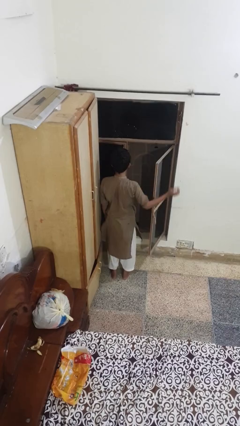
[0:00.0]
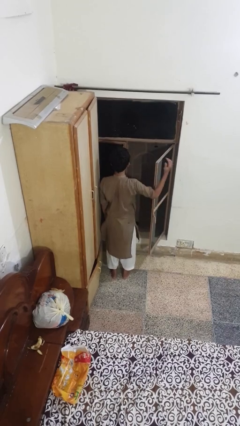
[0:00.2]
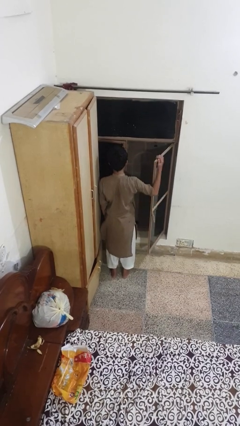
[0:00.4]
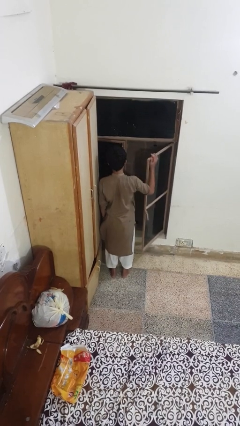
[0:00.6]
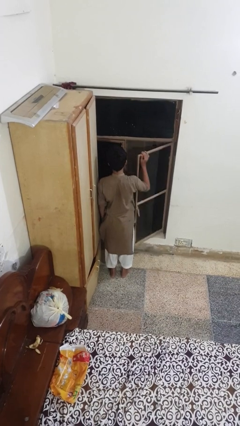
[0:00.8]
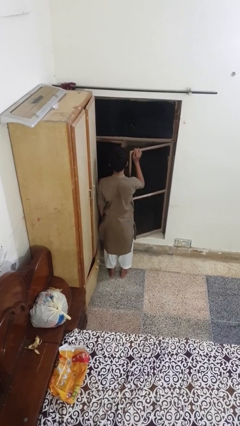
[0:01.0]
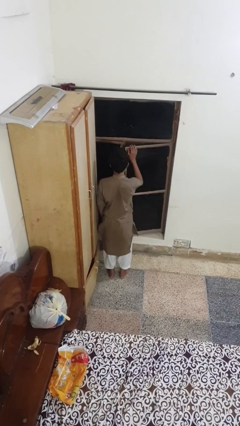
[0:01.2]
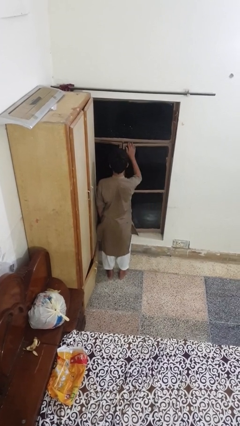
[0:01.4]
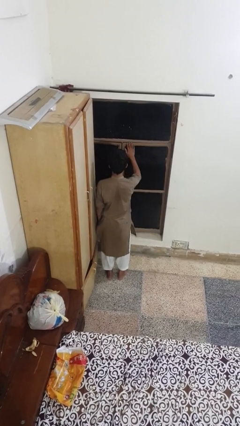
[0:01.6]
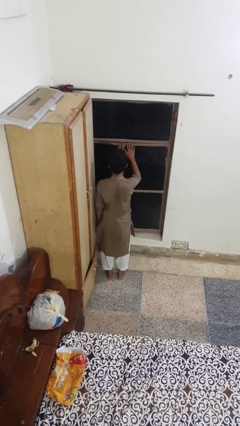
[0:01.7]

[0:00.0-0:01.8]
person closes home window

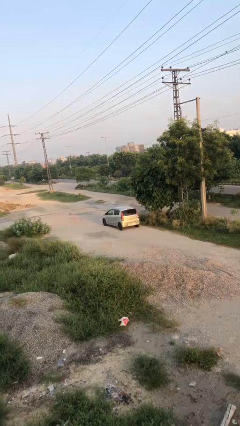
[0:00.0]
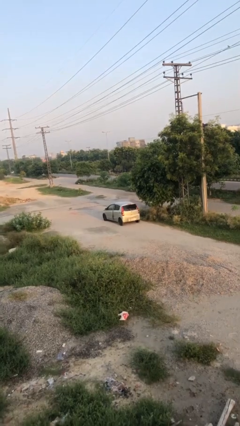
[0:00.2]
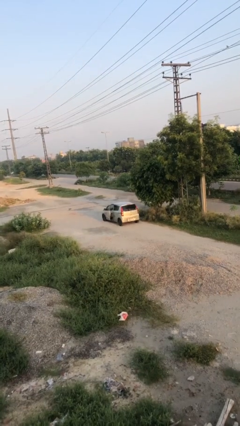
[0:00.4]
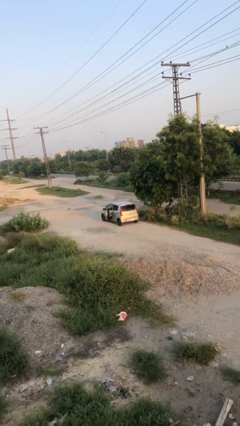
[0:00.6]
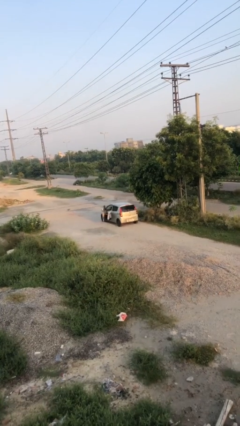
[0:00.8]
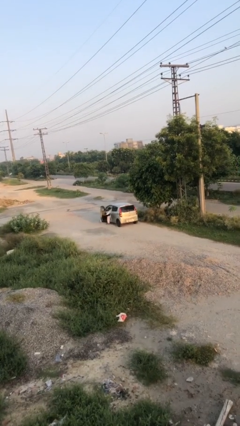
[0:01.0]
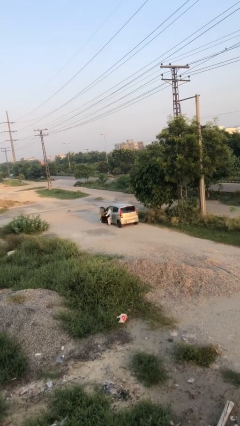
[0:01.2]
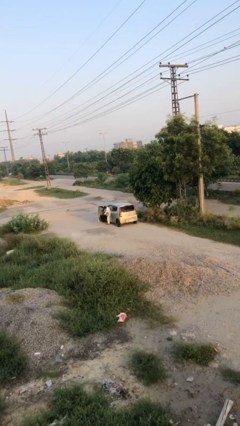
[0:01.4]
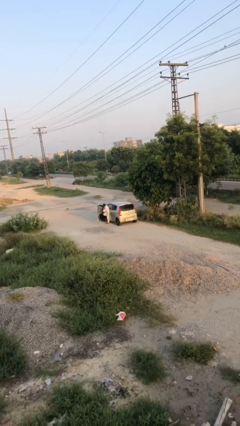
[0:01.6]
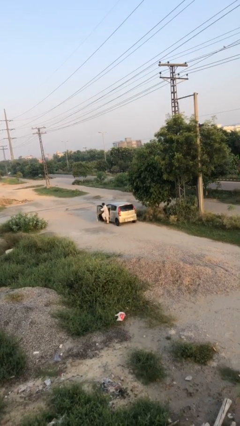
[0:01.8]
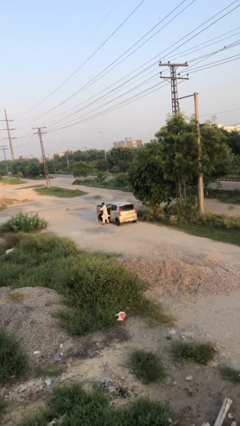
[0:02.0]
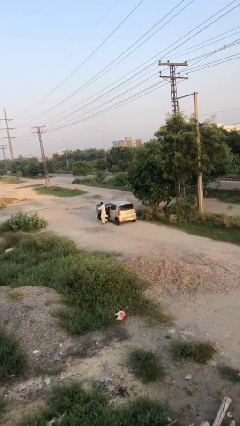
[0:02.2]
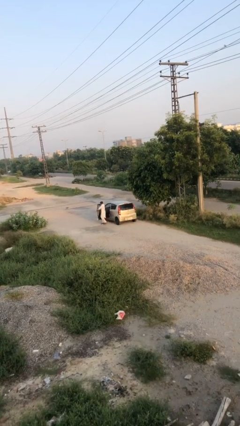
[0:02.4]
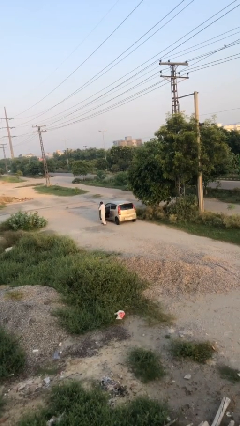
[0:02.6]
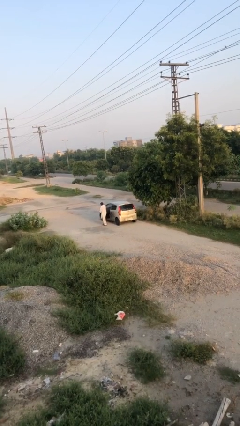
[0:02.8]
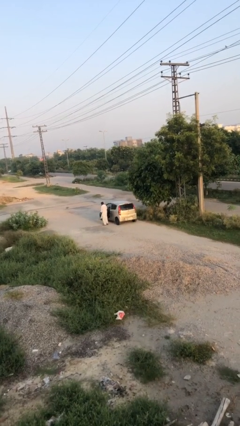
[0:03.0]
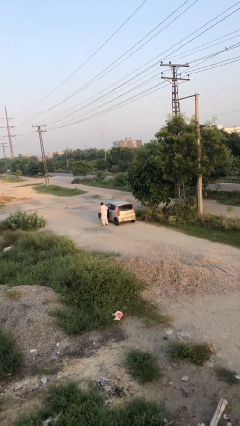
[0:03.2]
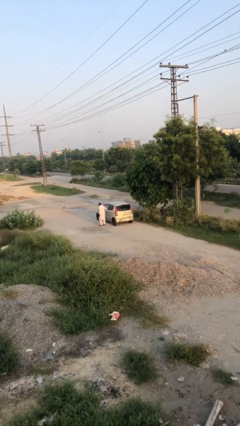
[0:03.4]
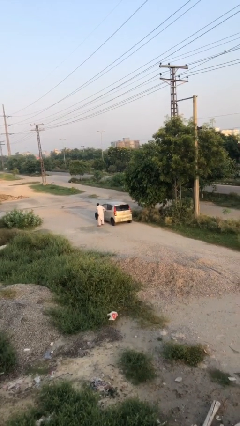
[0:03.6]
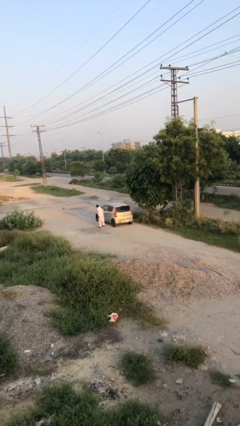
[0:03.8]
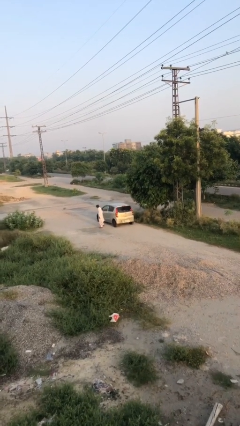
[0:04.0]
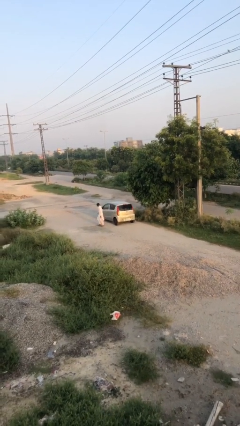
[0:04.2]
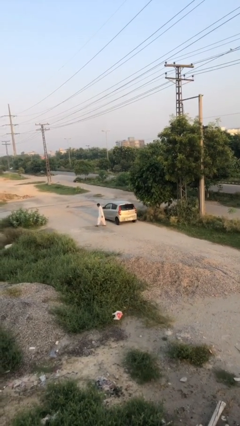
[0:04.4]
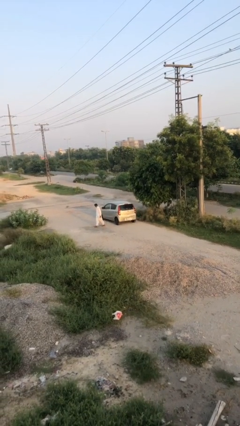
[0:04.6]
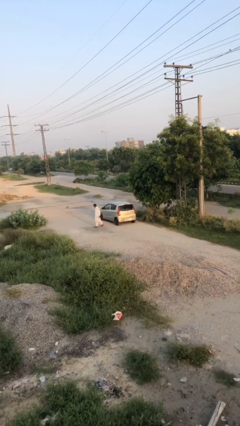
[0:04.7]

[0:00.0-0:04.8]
car drops off person

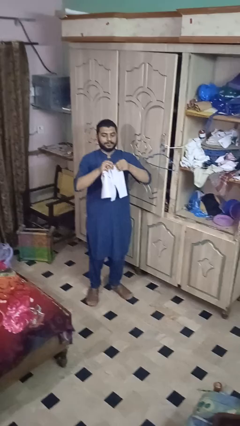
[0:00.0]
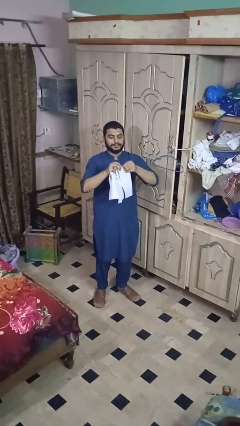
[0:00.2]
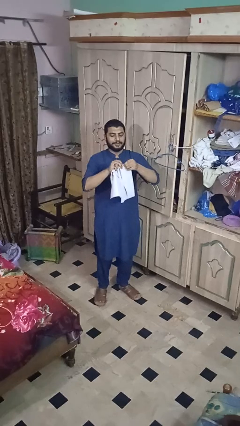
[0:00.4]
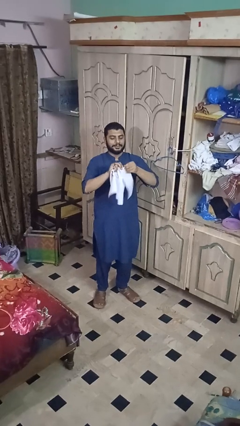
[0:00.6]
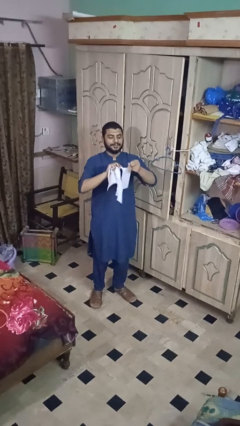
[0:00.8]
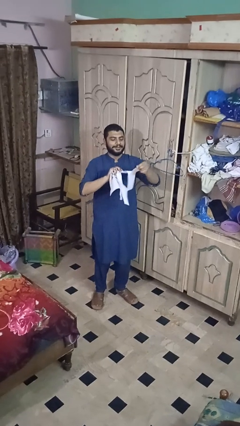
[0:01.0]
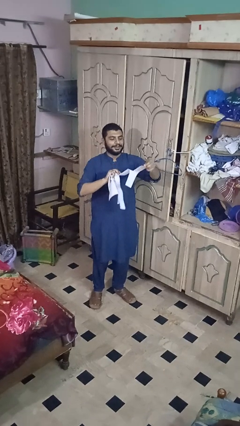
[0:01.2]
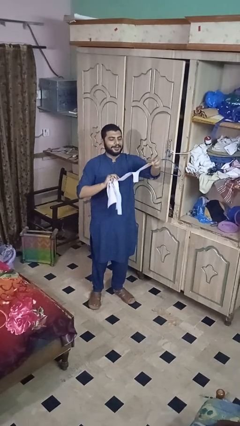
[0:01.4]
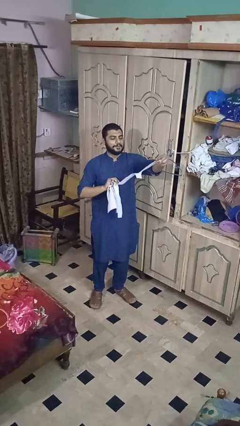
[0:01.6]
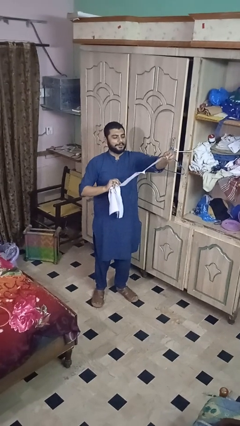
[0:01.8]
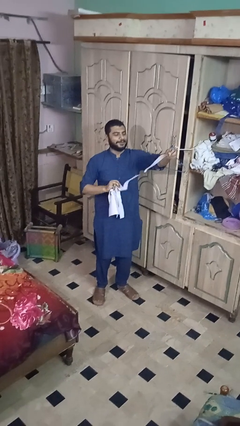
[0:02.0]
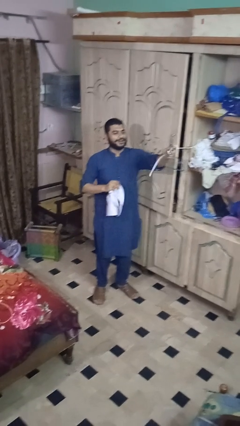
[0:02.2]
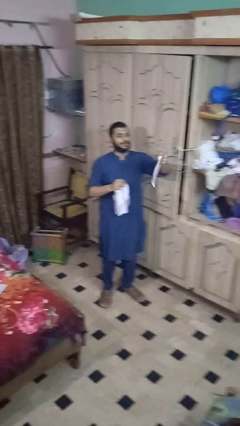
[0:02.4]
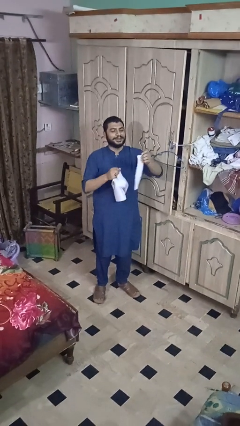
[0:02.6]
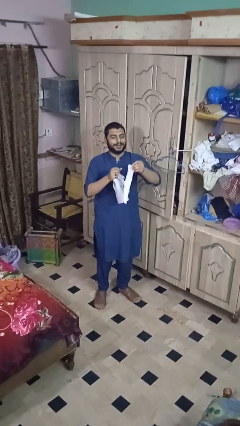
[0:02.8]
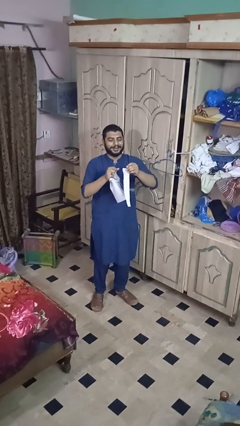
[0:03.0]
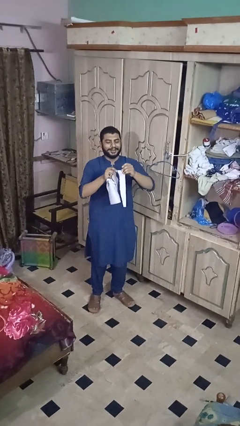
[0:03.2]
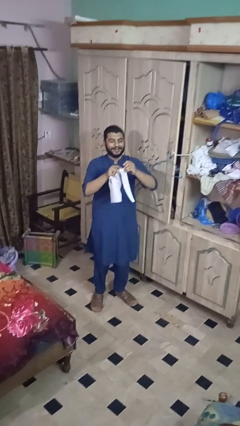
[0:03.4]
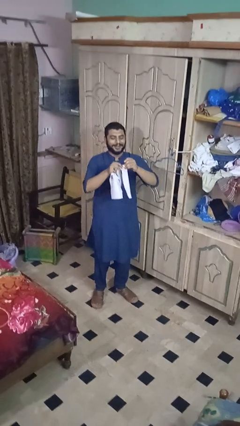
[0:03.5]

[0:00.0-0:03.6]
person tears paper

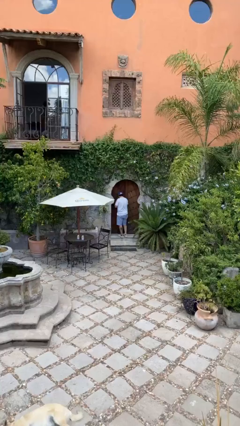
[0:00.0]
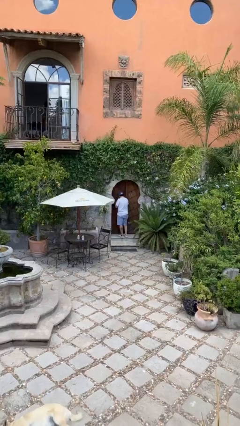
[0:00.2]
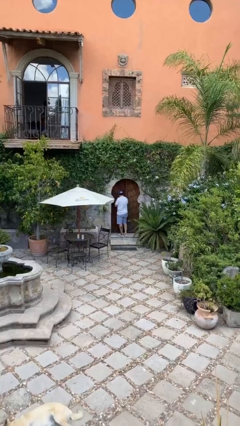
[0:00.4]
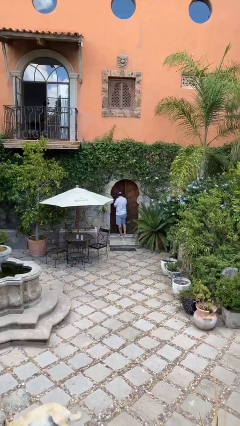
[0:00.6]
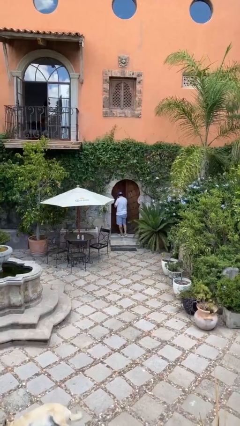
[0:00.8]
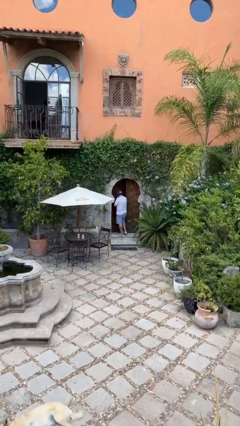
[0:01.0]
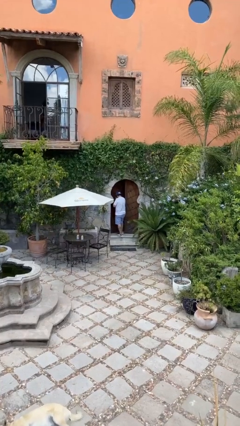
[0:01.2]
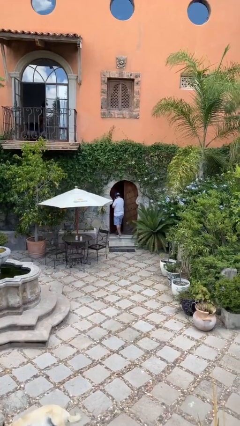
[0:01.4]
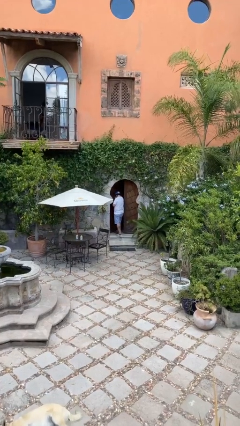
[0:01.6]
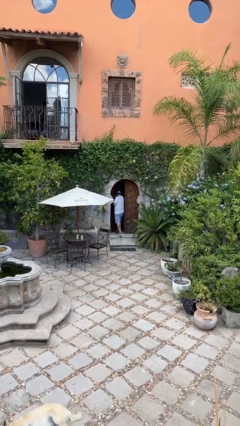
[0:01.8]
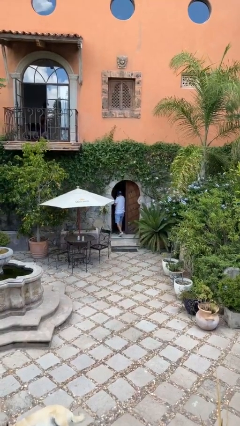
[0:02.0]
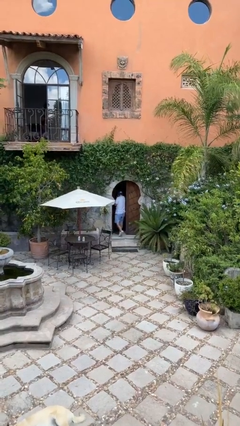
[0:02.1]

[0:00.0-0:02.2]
person opens facility door

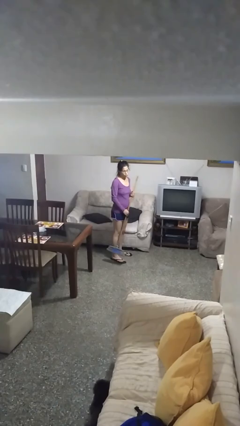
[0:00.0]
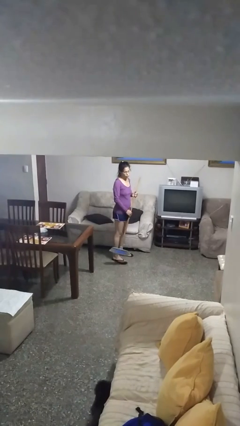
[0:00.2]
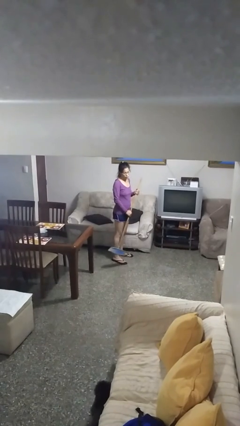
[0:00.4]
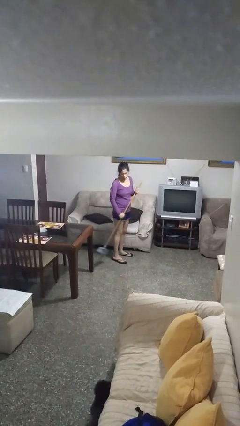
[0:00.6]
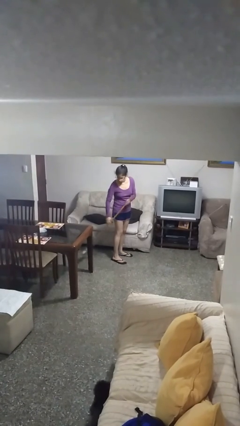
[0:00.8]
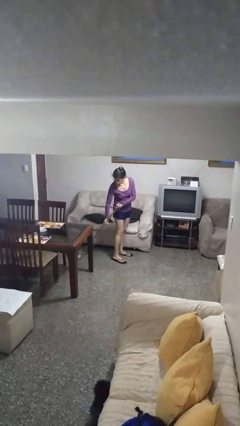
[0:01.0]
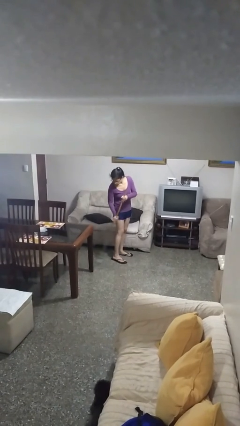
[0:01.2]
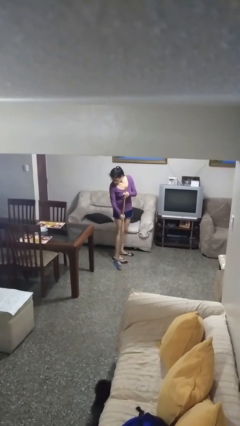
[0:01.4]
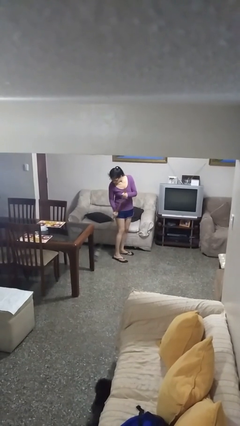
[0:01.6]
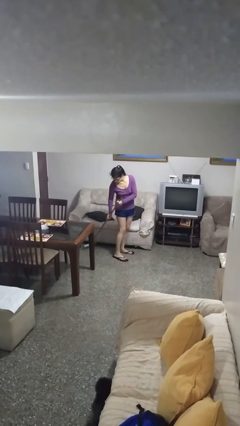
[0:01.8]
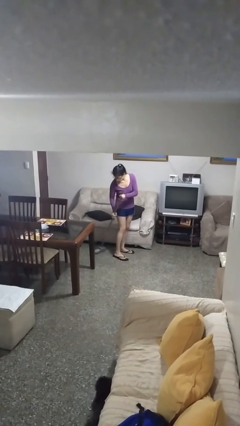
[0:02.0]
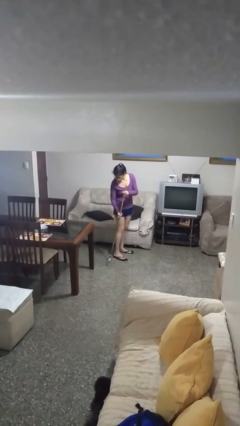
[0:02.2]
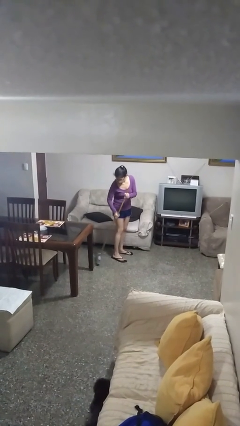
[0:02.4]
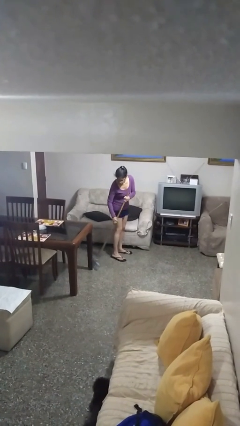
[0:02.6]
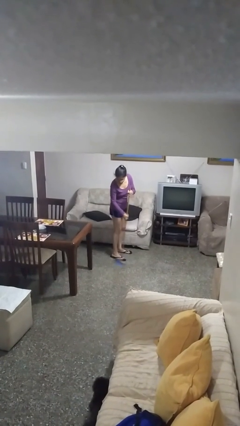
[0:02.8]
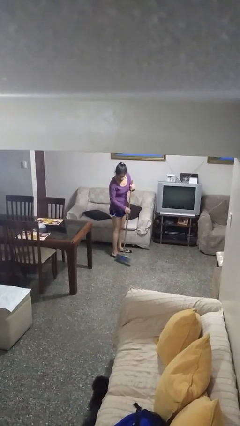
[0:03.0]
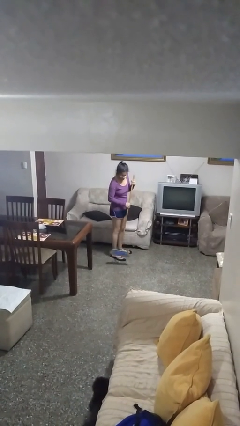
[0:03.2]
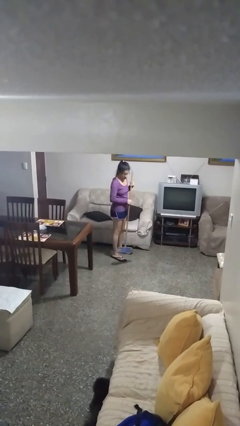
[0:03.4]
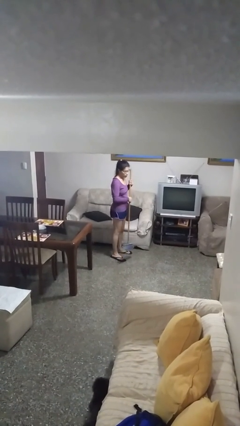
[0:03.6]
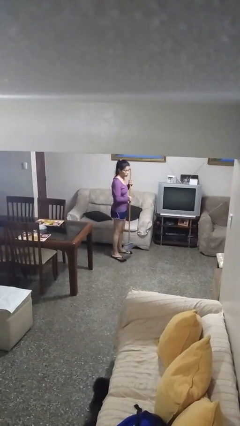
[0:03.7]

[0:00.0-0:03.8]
person sweeps floor

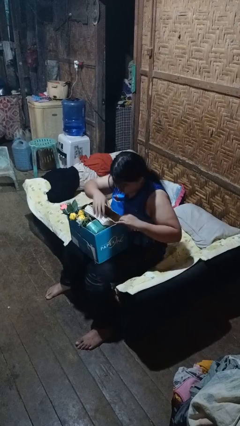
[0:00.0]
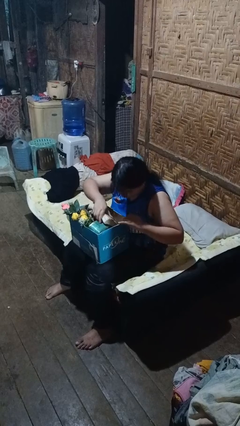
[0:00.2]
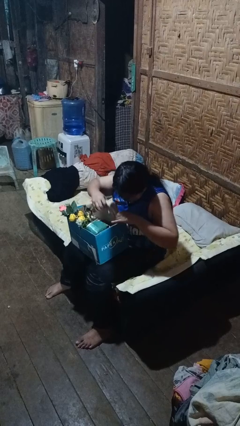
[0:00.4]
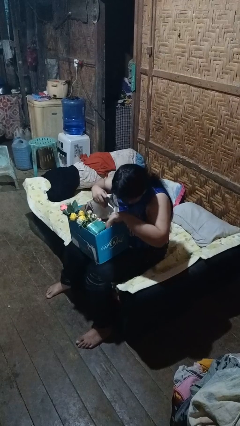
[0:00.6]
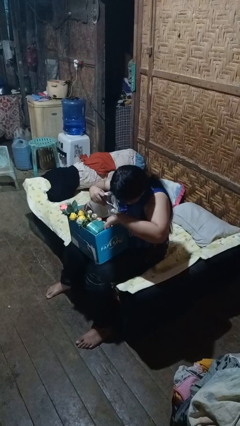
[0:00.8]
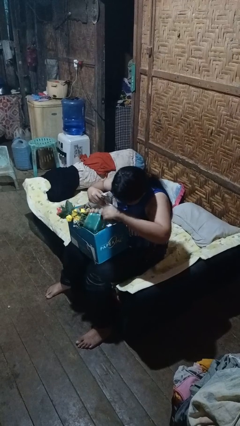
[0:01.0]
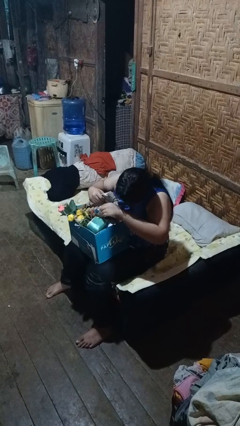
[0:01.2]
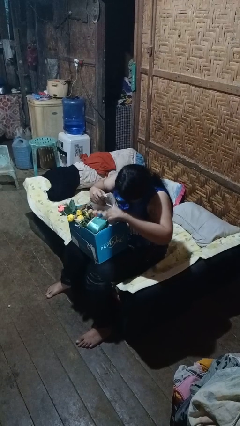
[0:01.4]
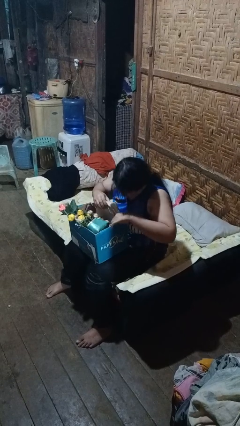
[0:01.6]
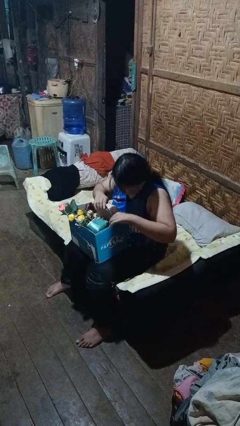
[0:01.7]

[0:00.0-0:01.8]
person searches in box
